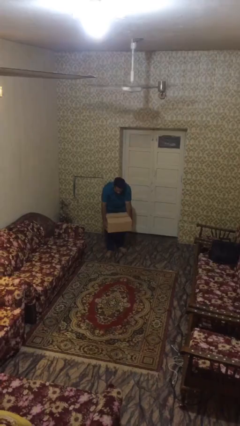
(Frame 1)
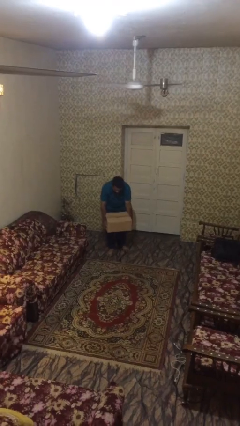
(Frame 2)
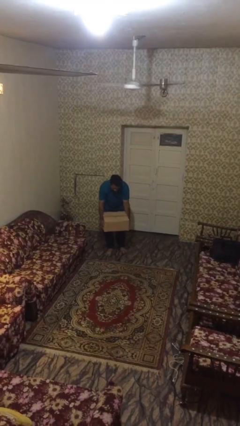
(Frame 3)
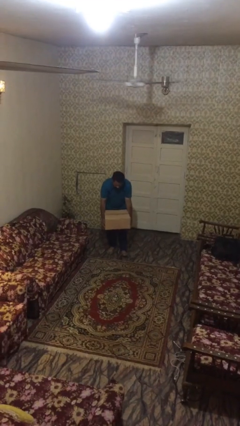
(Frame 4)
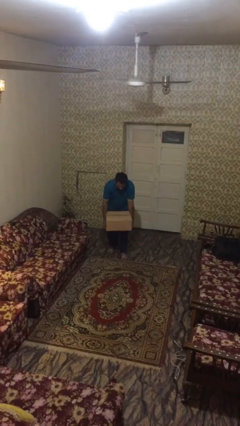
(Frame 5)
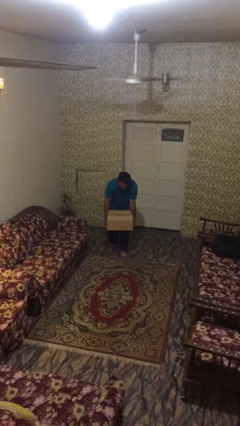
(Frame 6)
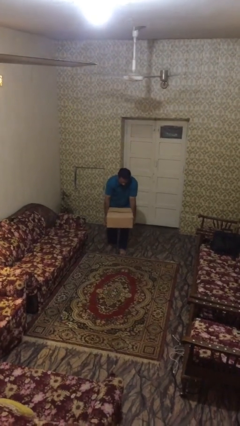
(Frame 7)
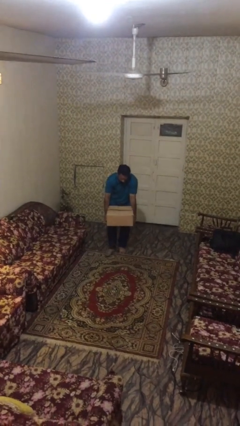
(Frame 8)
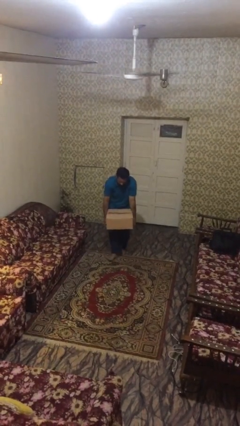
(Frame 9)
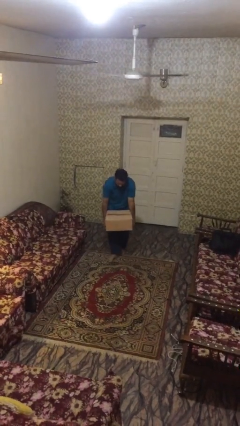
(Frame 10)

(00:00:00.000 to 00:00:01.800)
person carries heavy object

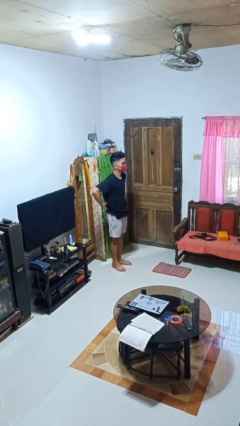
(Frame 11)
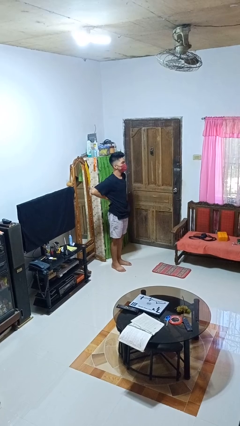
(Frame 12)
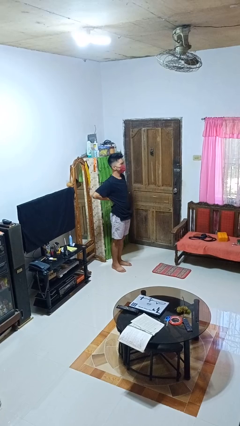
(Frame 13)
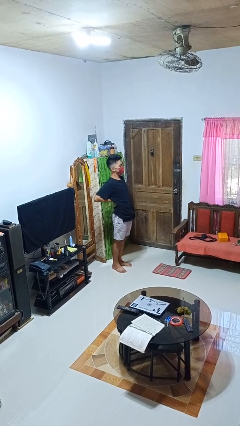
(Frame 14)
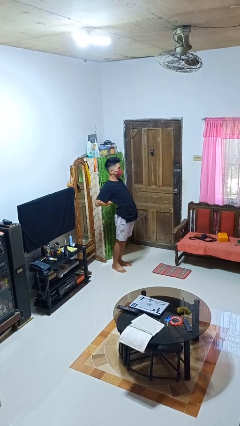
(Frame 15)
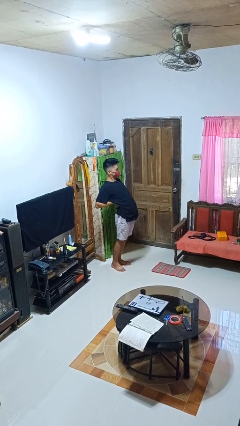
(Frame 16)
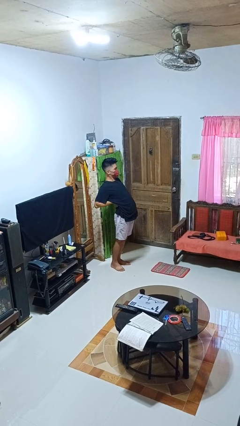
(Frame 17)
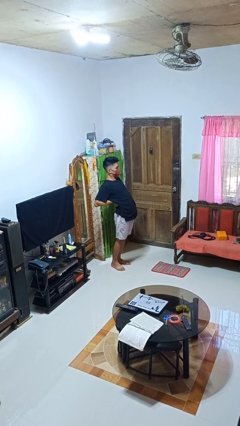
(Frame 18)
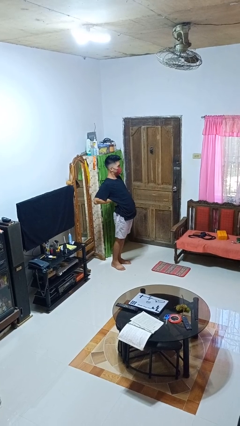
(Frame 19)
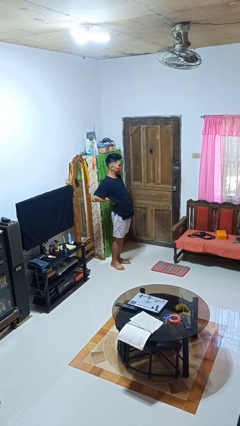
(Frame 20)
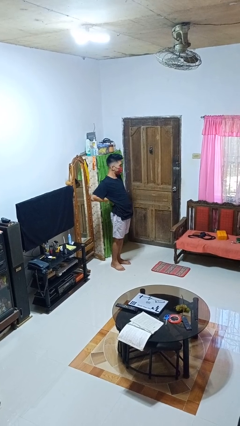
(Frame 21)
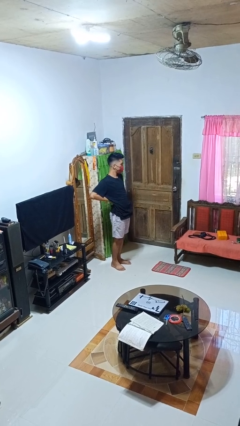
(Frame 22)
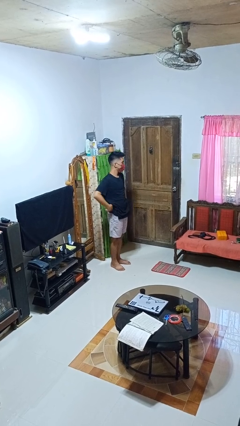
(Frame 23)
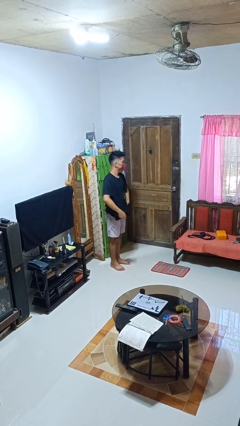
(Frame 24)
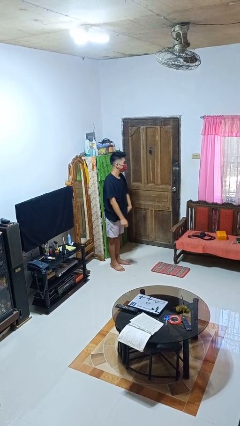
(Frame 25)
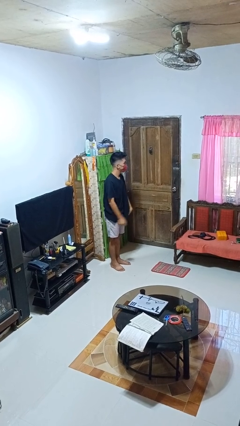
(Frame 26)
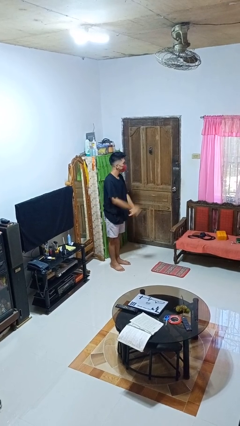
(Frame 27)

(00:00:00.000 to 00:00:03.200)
person stretches back

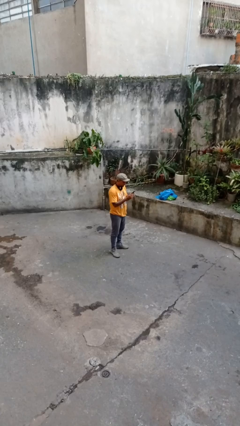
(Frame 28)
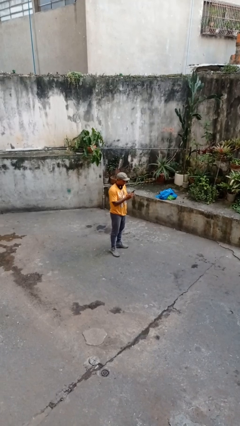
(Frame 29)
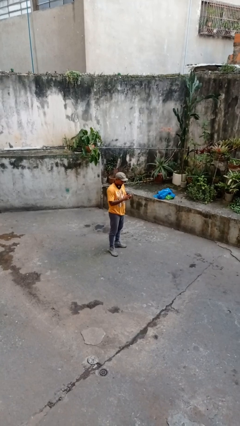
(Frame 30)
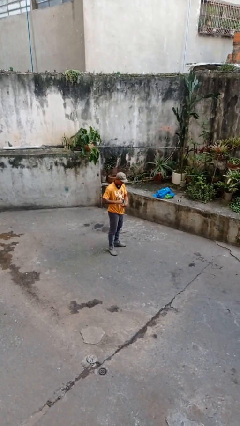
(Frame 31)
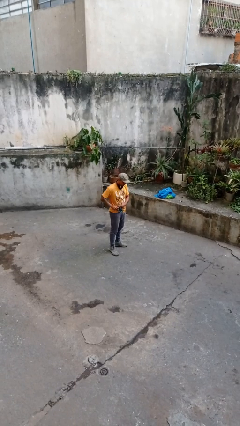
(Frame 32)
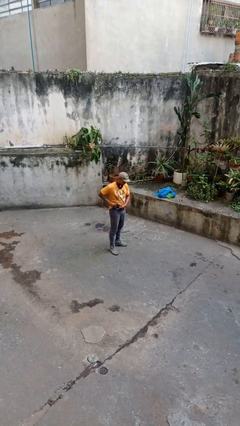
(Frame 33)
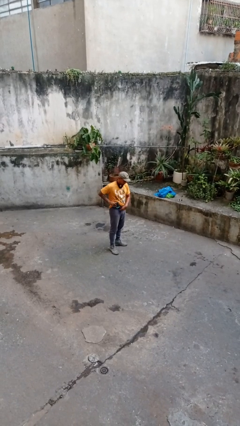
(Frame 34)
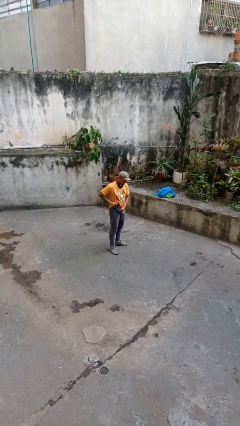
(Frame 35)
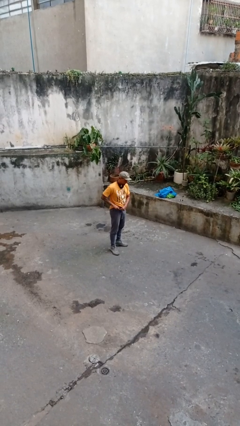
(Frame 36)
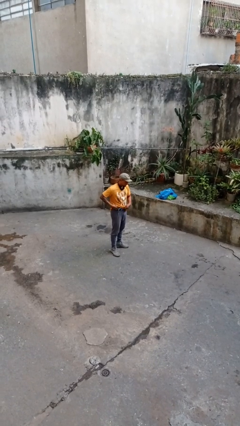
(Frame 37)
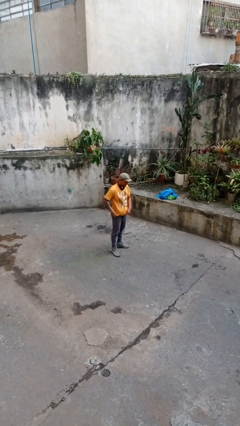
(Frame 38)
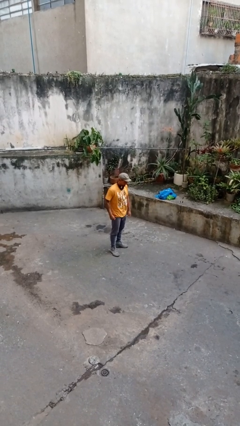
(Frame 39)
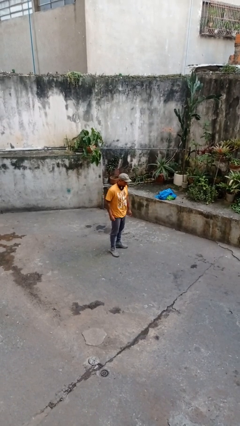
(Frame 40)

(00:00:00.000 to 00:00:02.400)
person puts phone into pocket

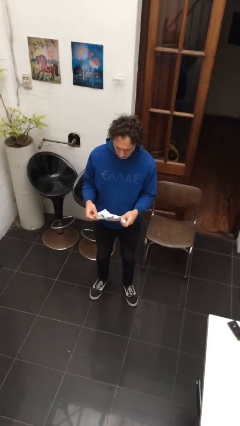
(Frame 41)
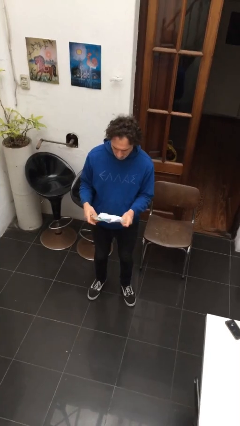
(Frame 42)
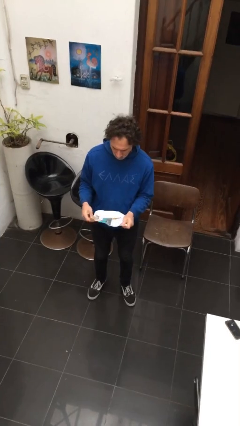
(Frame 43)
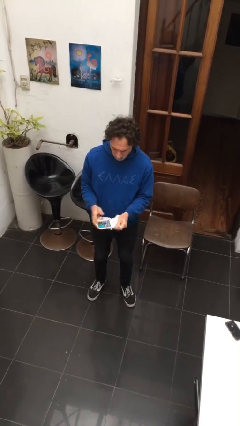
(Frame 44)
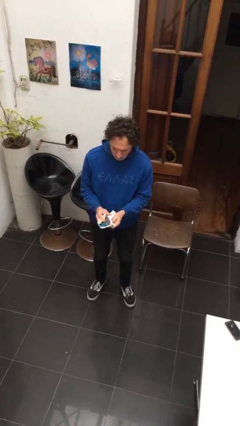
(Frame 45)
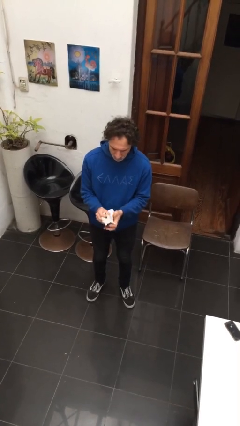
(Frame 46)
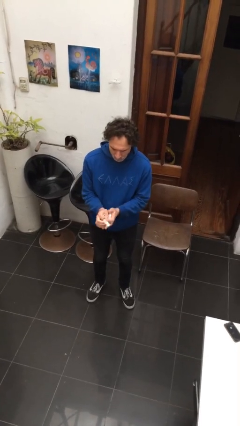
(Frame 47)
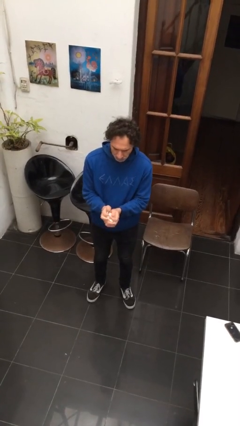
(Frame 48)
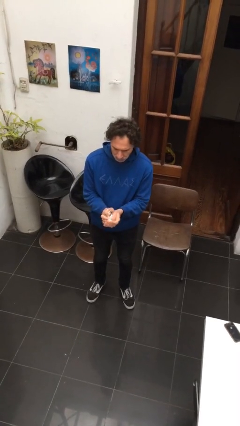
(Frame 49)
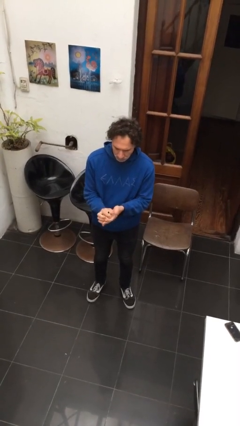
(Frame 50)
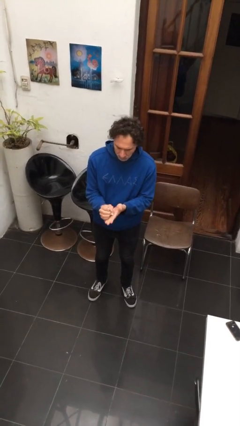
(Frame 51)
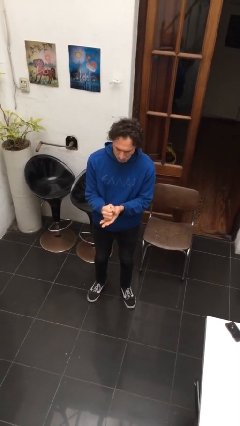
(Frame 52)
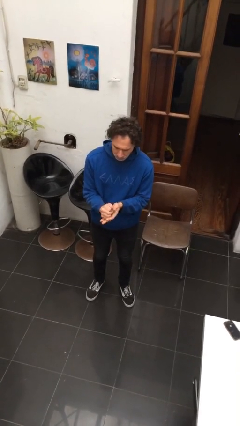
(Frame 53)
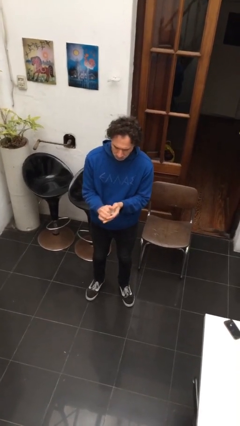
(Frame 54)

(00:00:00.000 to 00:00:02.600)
person crumples paper

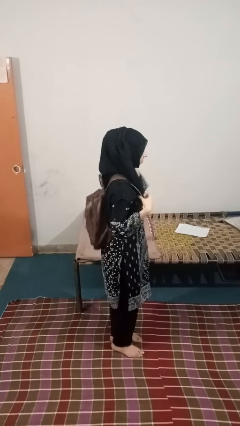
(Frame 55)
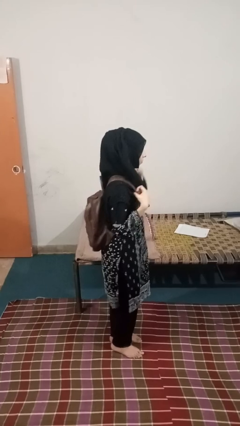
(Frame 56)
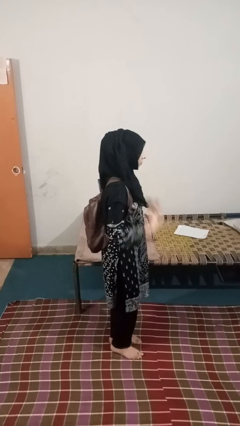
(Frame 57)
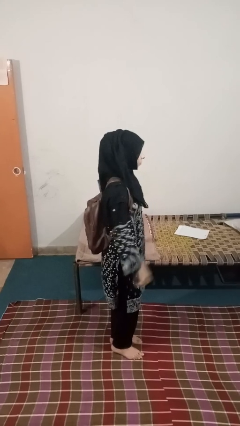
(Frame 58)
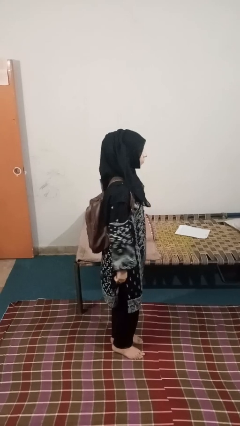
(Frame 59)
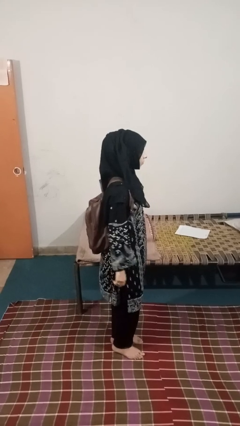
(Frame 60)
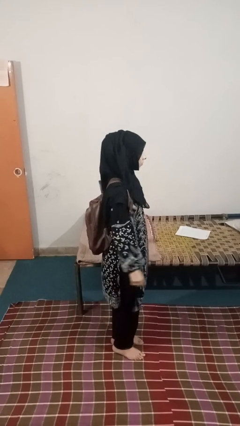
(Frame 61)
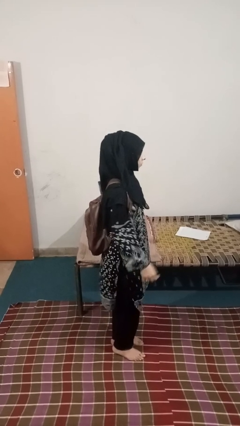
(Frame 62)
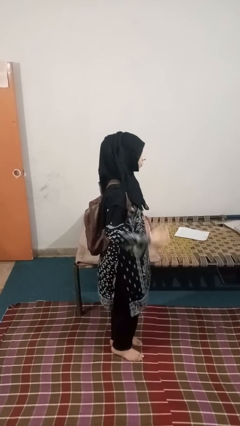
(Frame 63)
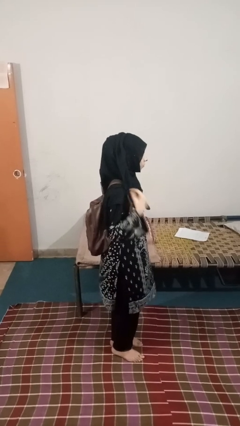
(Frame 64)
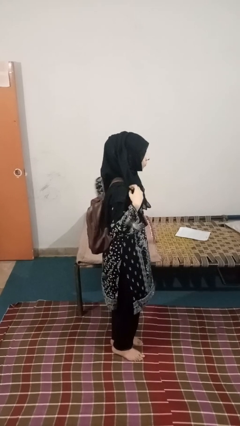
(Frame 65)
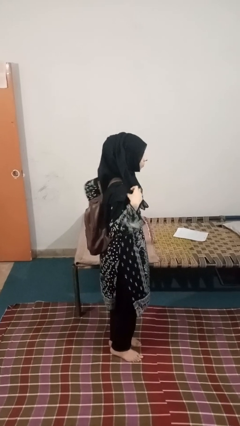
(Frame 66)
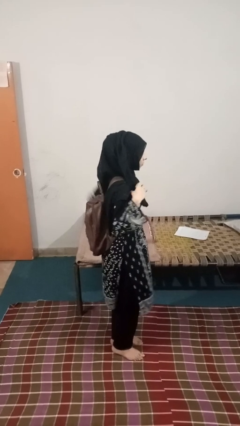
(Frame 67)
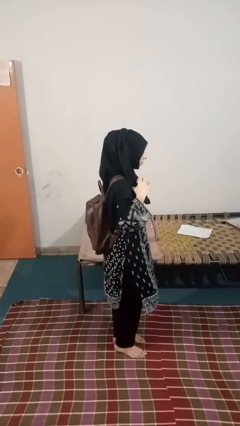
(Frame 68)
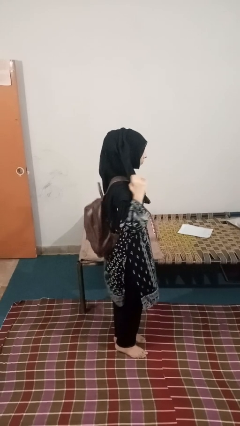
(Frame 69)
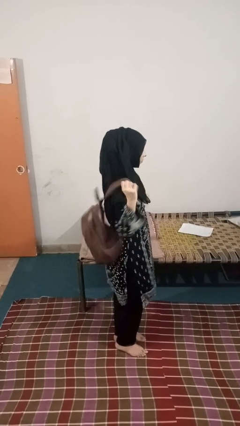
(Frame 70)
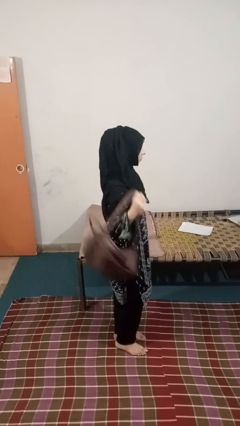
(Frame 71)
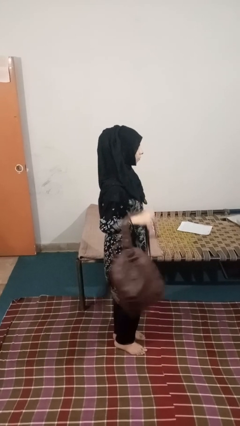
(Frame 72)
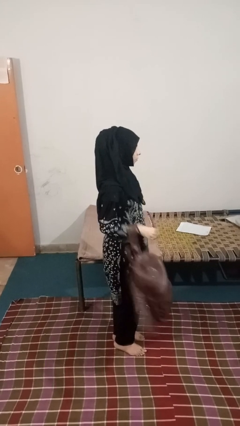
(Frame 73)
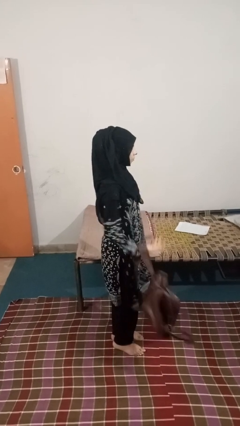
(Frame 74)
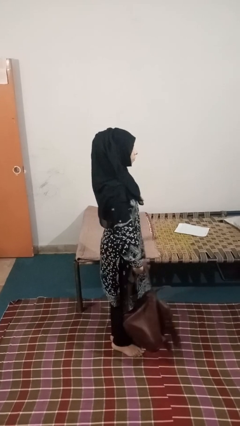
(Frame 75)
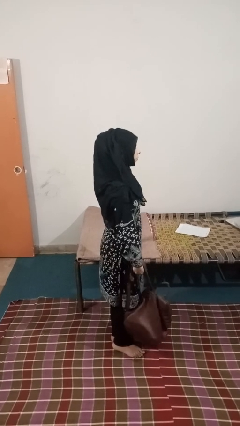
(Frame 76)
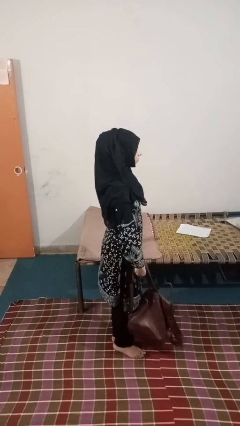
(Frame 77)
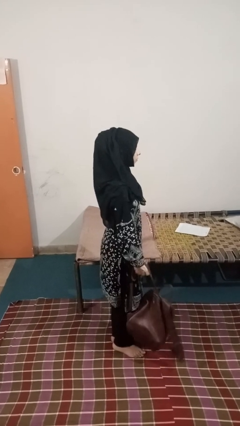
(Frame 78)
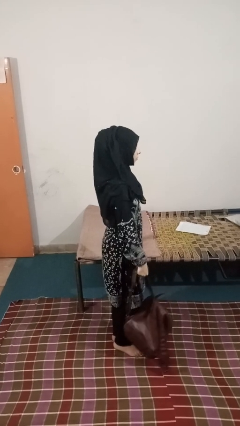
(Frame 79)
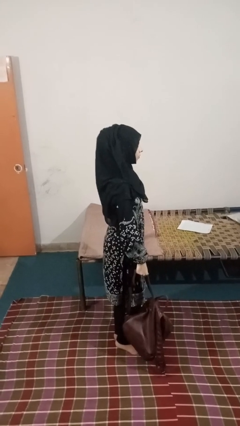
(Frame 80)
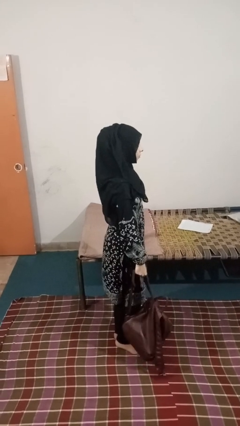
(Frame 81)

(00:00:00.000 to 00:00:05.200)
person takes off backpack

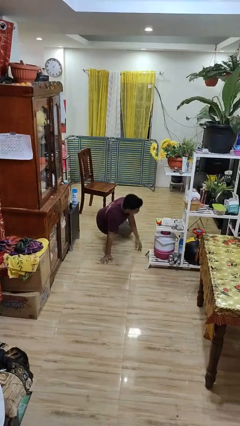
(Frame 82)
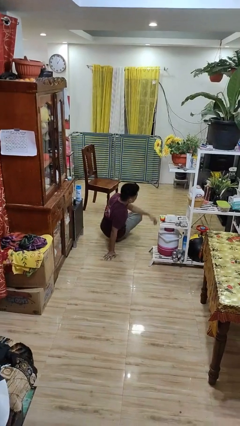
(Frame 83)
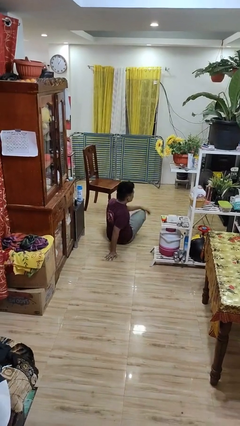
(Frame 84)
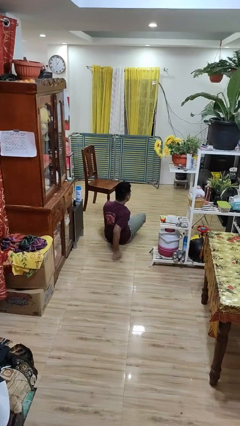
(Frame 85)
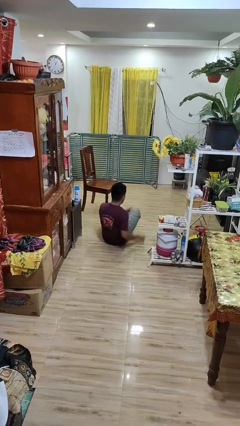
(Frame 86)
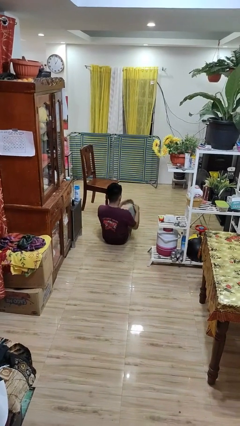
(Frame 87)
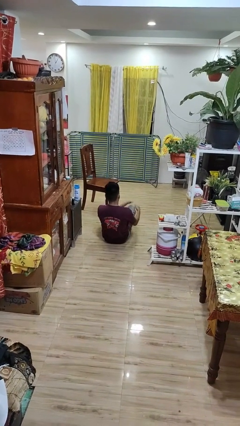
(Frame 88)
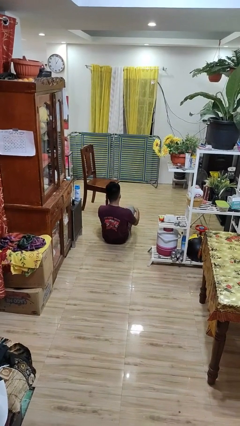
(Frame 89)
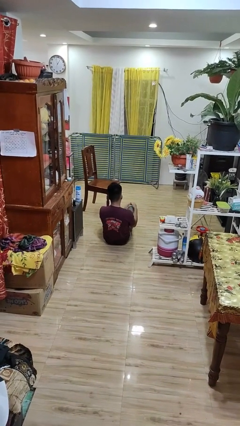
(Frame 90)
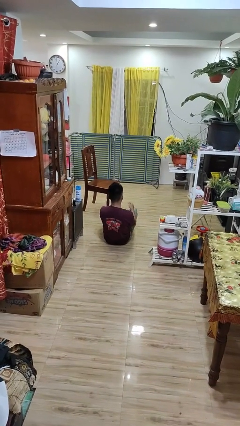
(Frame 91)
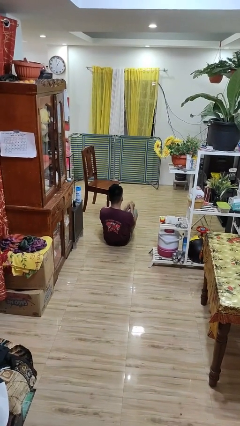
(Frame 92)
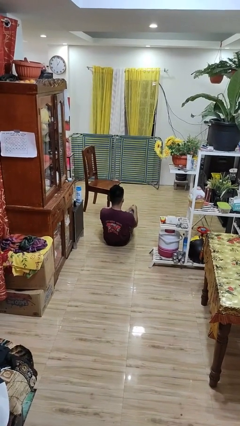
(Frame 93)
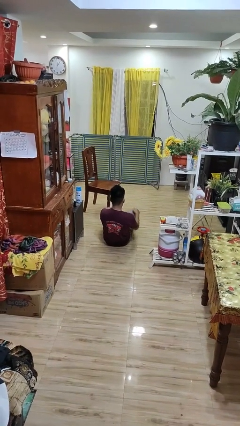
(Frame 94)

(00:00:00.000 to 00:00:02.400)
person lies down on floor
